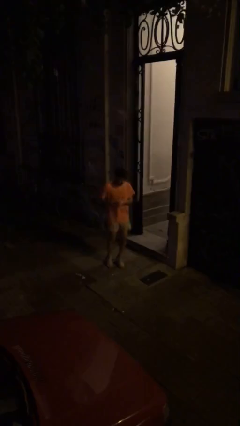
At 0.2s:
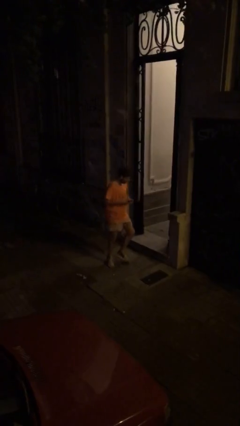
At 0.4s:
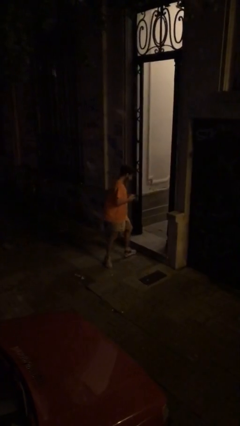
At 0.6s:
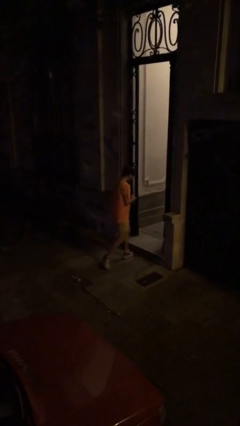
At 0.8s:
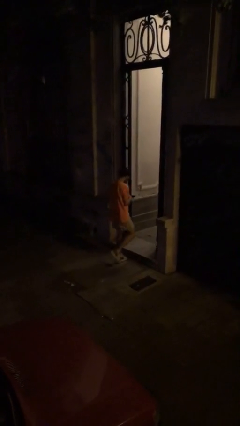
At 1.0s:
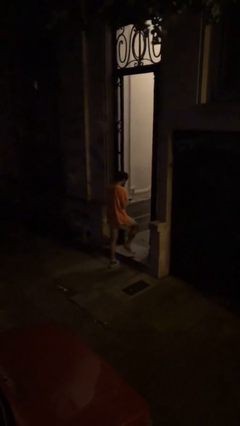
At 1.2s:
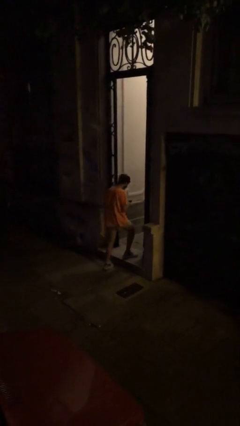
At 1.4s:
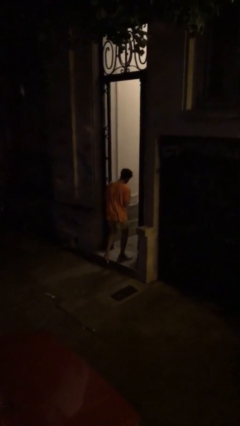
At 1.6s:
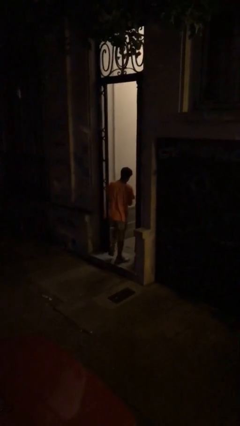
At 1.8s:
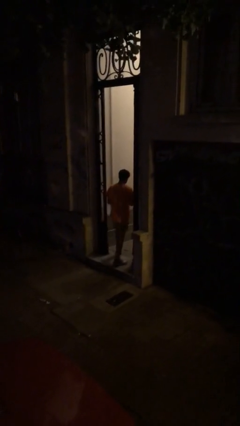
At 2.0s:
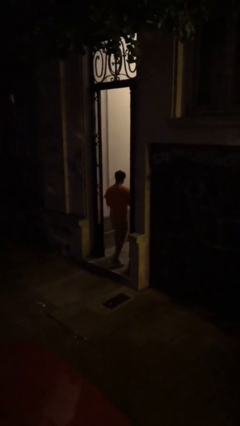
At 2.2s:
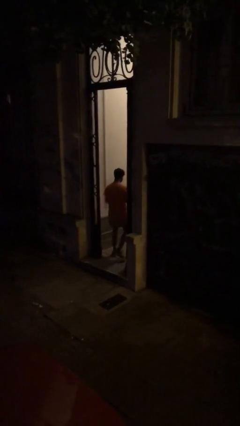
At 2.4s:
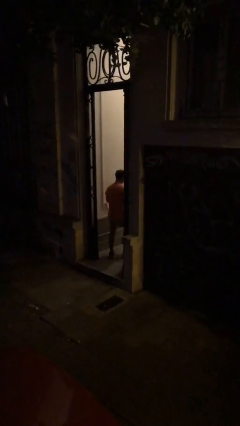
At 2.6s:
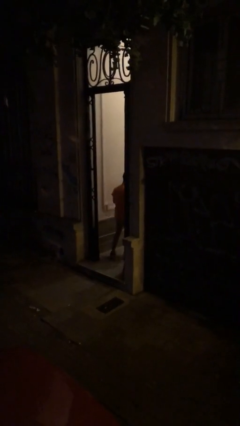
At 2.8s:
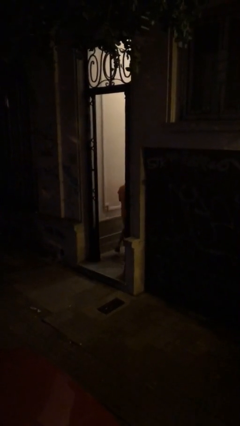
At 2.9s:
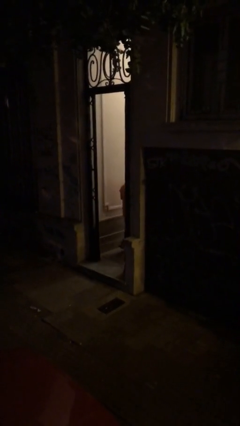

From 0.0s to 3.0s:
person exits scene through structure

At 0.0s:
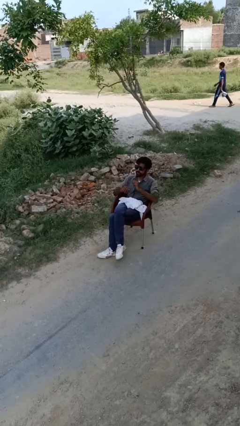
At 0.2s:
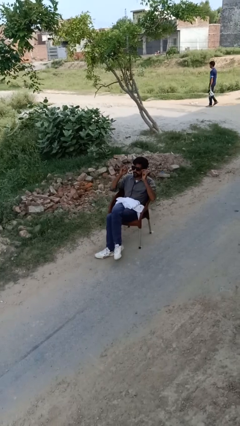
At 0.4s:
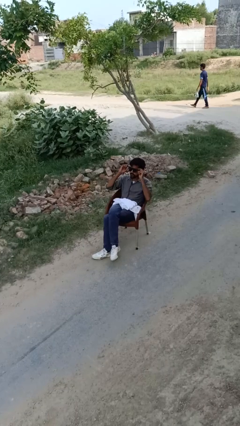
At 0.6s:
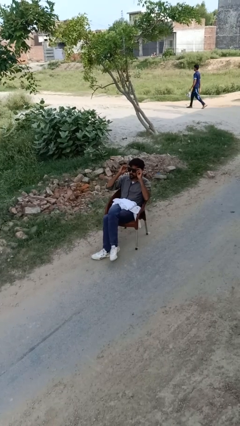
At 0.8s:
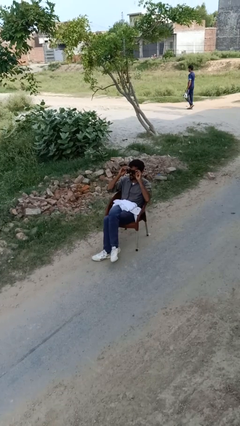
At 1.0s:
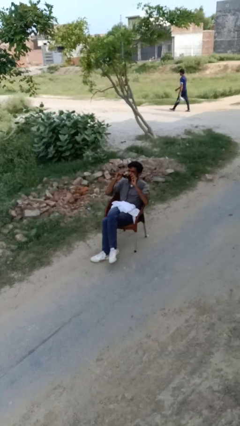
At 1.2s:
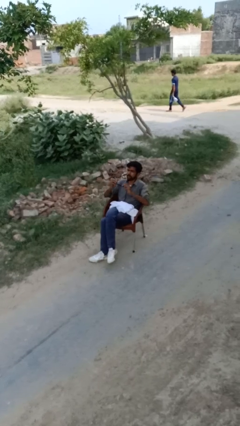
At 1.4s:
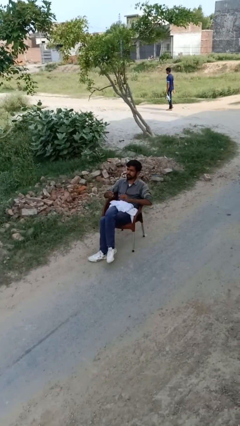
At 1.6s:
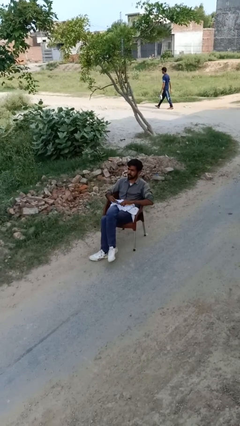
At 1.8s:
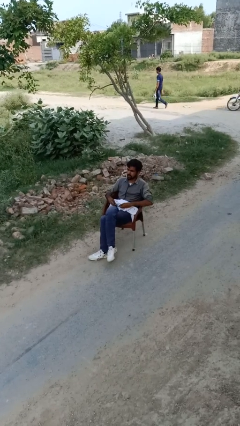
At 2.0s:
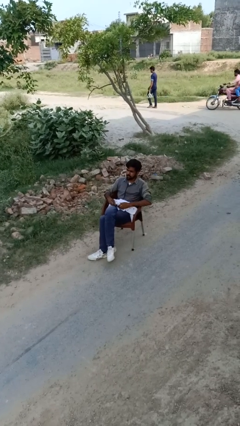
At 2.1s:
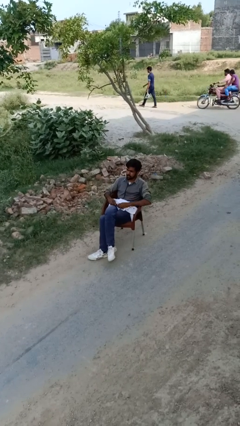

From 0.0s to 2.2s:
person takes off glasses

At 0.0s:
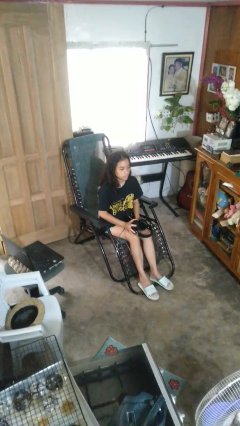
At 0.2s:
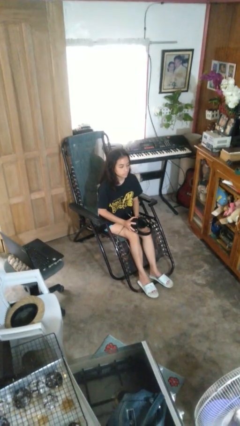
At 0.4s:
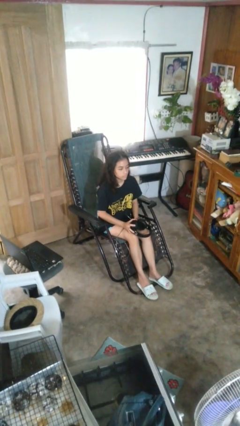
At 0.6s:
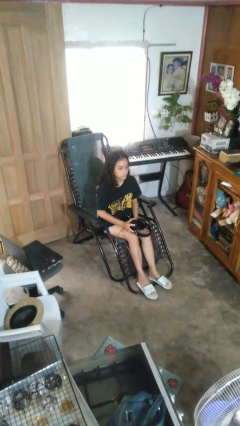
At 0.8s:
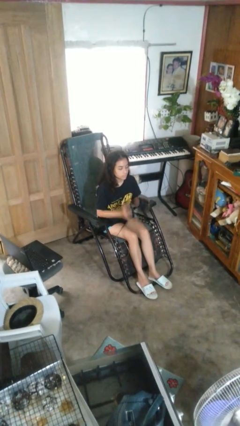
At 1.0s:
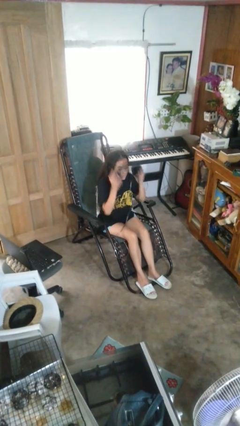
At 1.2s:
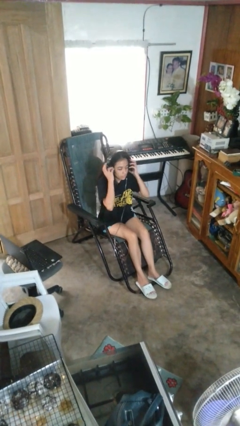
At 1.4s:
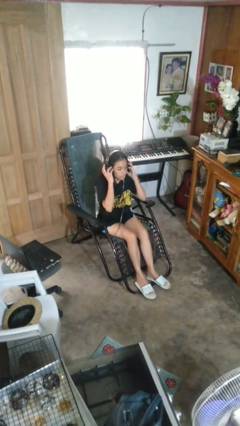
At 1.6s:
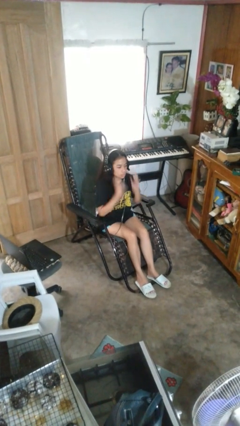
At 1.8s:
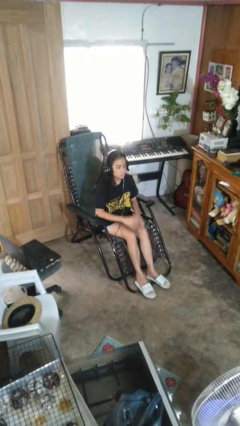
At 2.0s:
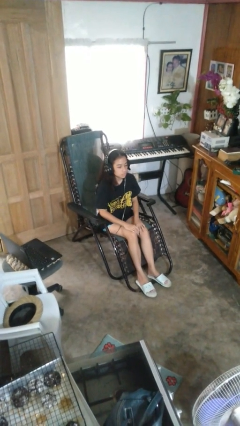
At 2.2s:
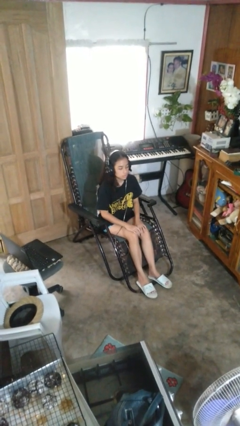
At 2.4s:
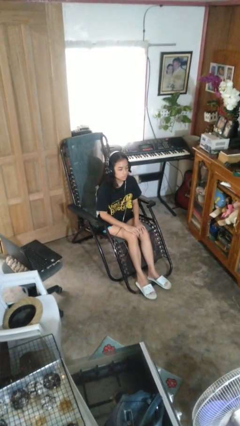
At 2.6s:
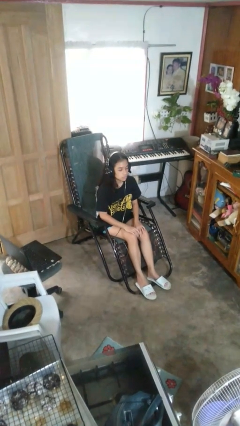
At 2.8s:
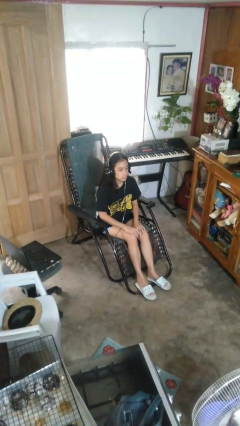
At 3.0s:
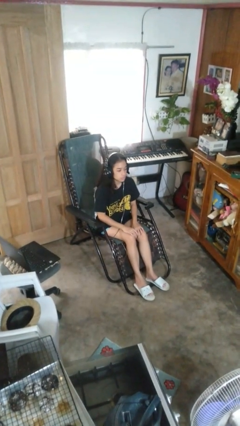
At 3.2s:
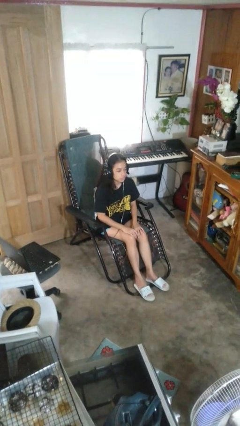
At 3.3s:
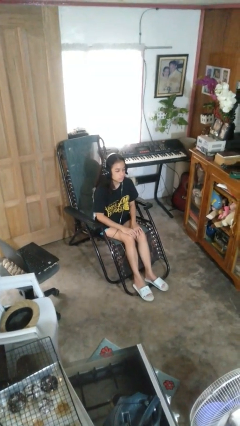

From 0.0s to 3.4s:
person puts on headphones

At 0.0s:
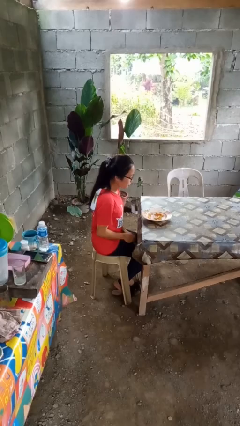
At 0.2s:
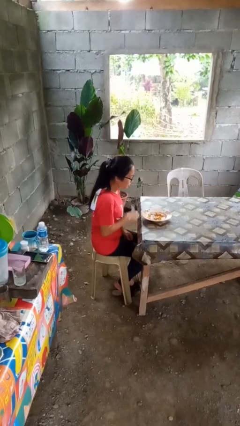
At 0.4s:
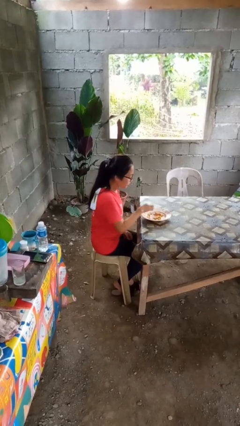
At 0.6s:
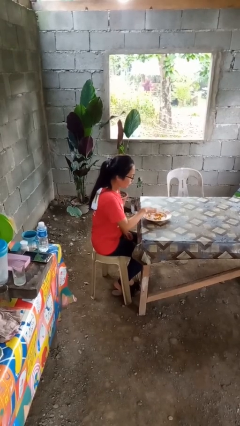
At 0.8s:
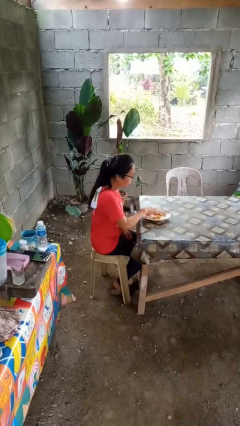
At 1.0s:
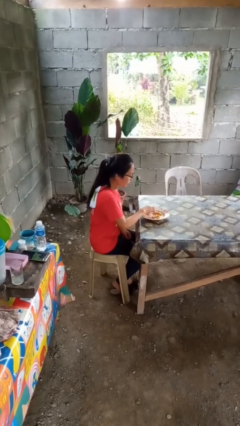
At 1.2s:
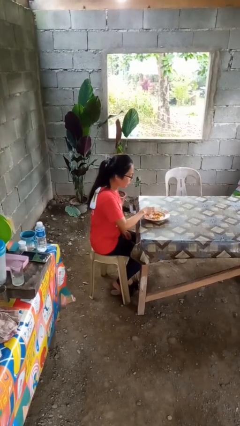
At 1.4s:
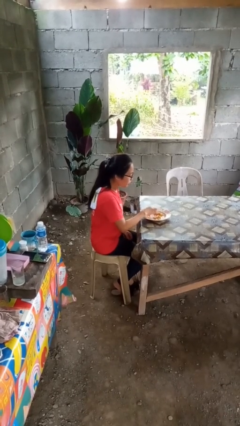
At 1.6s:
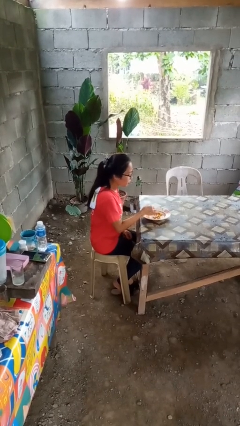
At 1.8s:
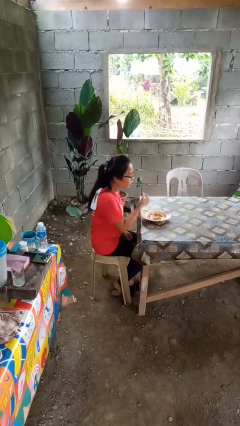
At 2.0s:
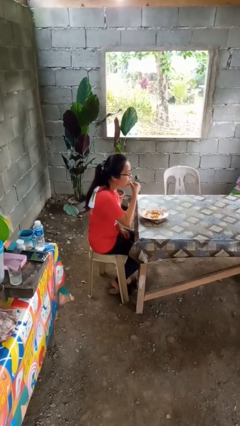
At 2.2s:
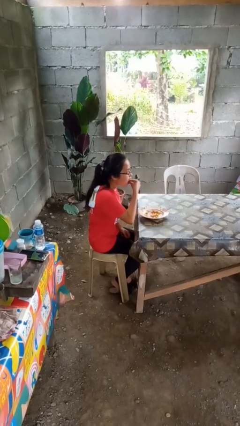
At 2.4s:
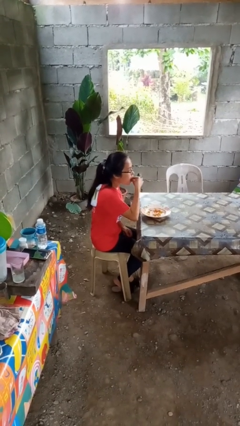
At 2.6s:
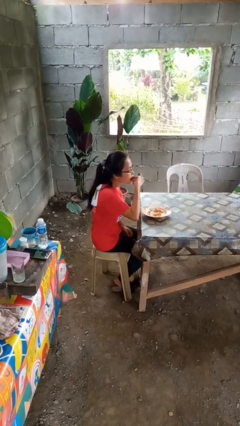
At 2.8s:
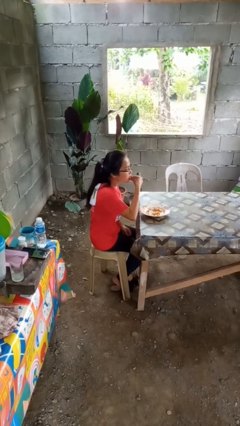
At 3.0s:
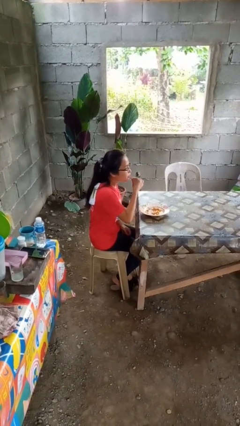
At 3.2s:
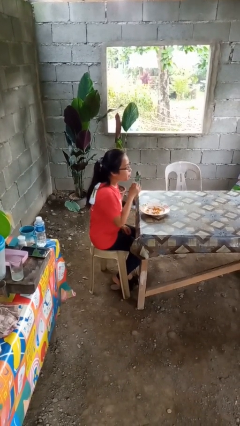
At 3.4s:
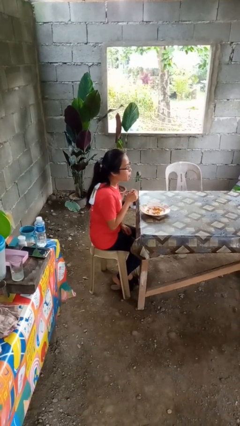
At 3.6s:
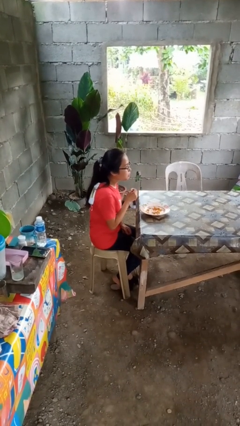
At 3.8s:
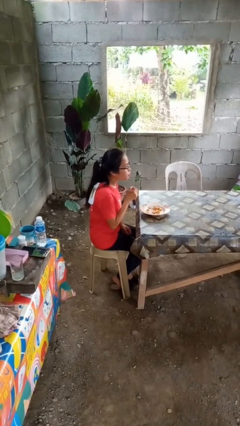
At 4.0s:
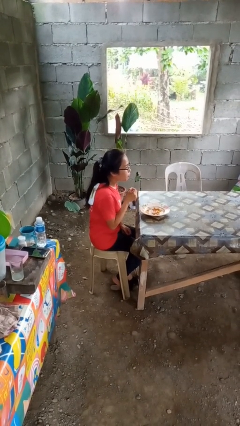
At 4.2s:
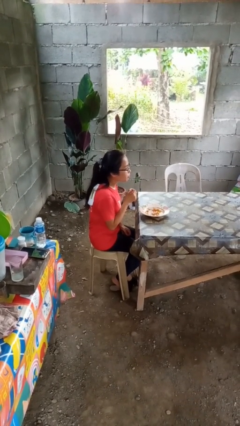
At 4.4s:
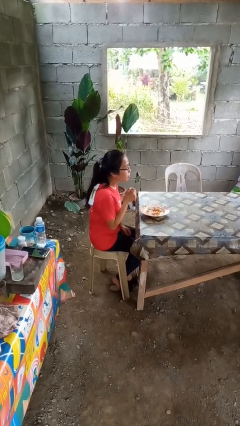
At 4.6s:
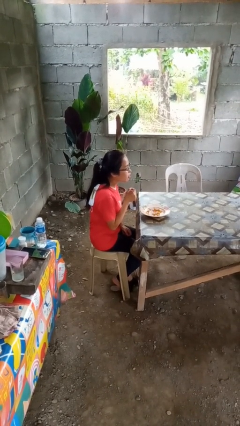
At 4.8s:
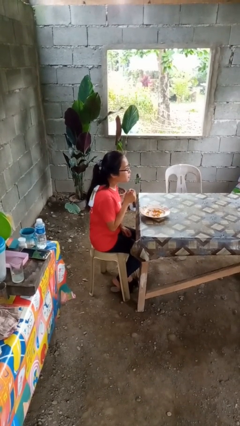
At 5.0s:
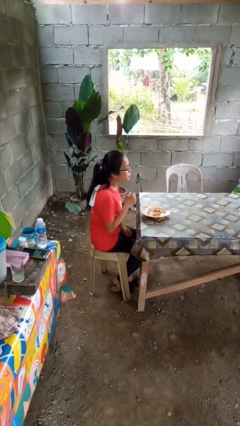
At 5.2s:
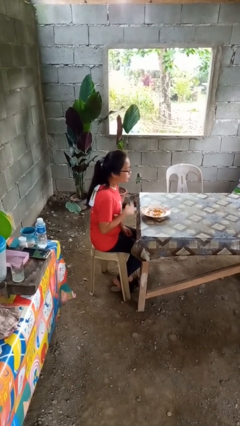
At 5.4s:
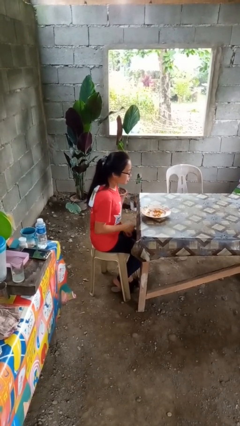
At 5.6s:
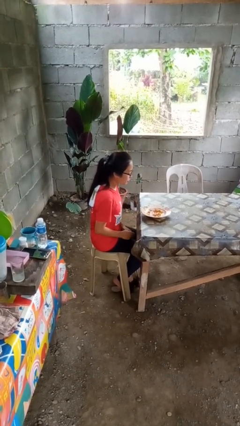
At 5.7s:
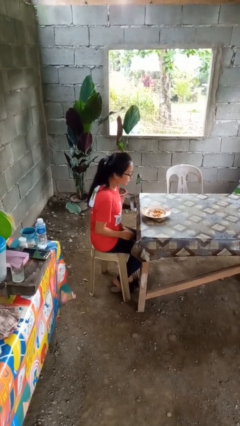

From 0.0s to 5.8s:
person eats with hands

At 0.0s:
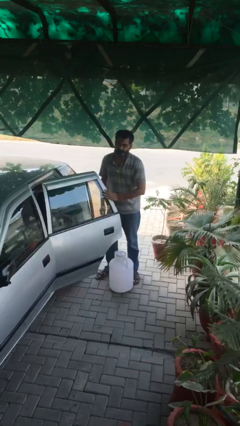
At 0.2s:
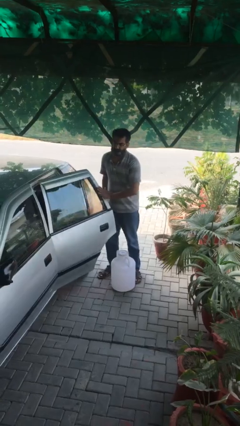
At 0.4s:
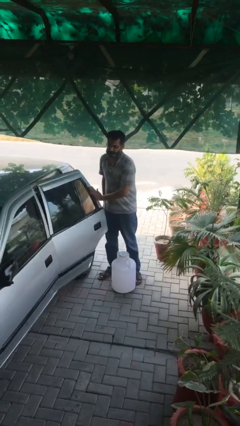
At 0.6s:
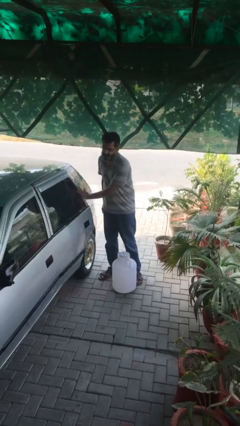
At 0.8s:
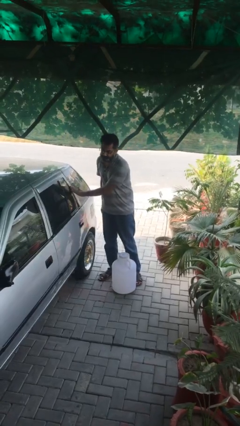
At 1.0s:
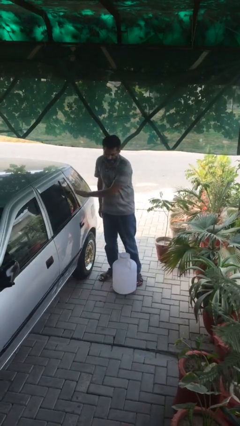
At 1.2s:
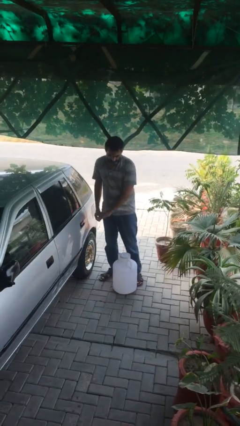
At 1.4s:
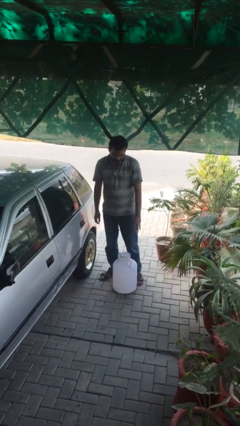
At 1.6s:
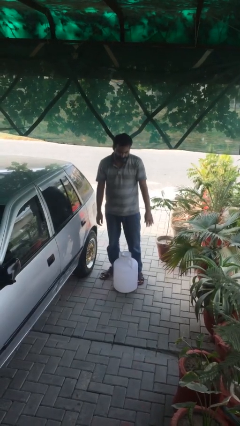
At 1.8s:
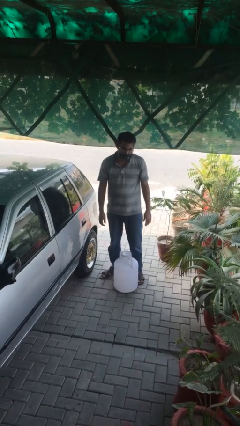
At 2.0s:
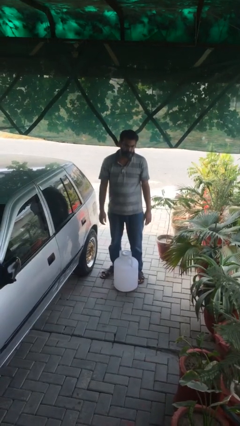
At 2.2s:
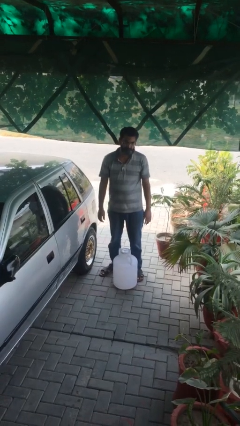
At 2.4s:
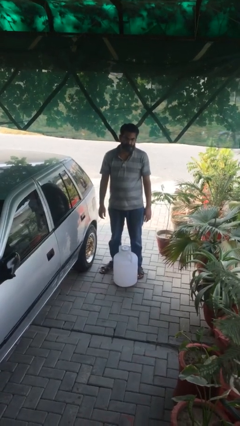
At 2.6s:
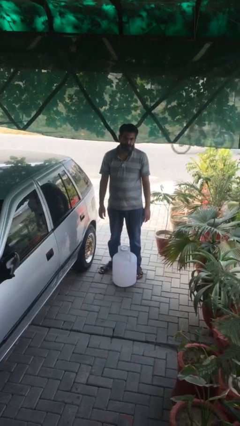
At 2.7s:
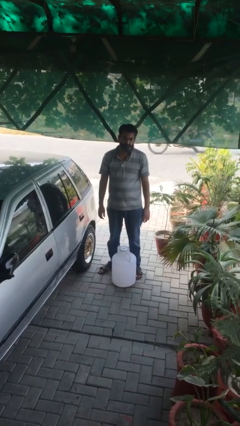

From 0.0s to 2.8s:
person closes car door
